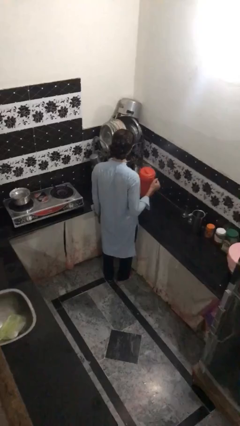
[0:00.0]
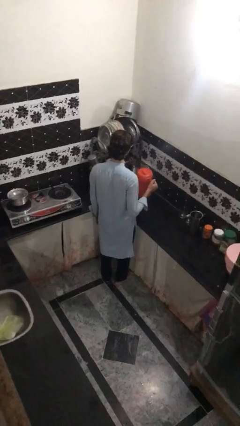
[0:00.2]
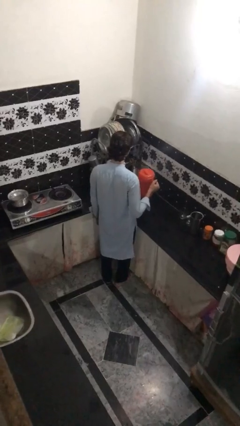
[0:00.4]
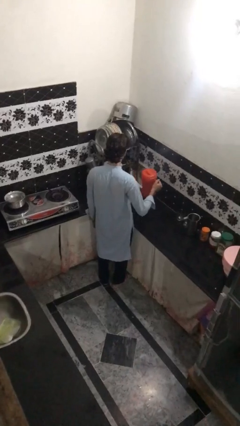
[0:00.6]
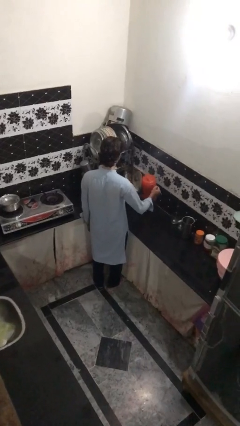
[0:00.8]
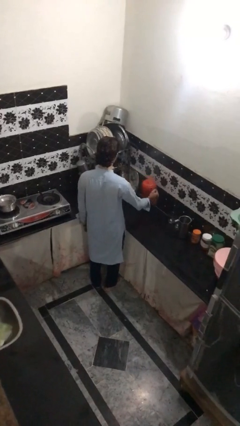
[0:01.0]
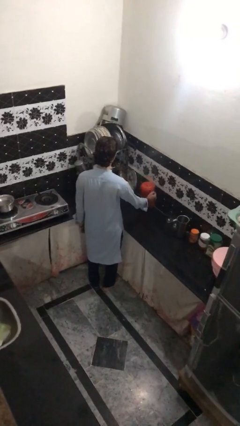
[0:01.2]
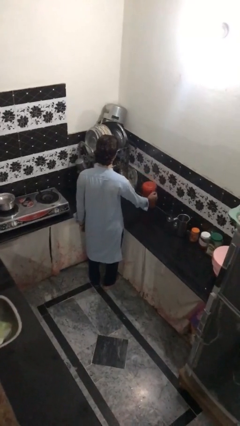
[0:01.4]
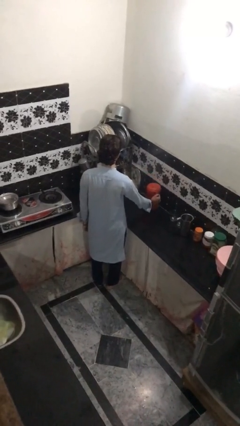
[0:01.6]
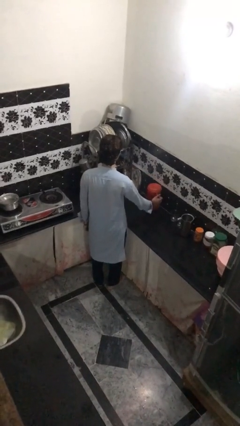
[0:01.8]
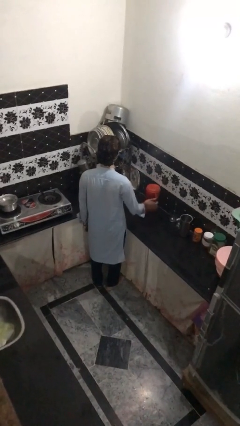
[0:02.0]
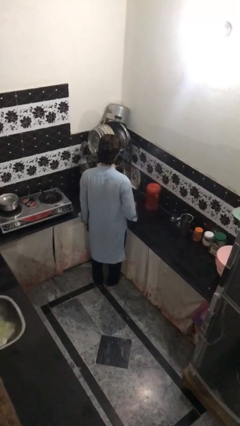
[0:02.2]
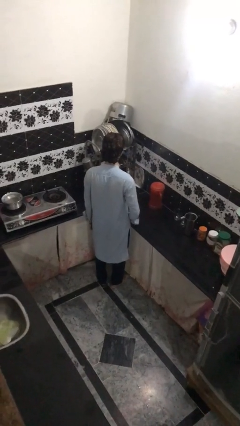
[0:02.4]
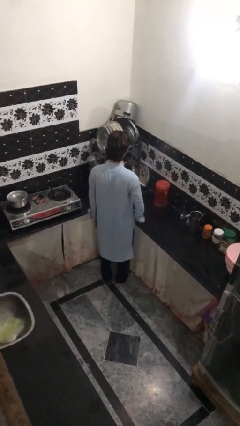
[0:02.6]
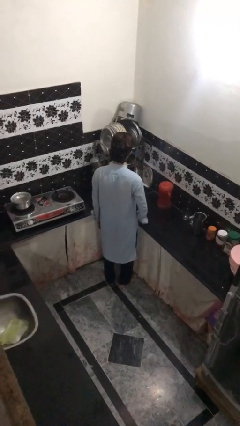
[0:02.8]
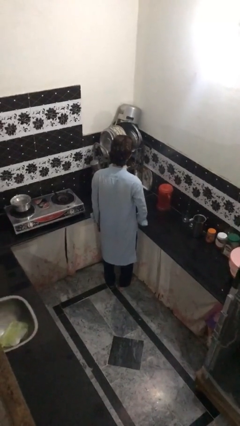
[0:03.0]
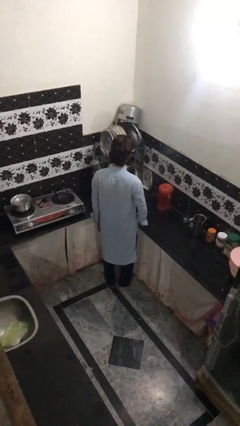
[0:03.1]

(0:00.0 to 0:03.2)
person puts down object on countertop

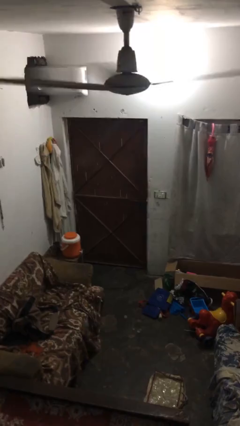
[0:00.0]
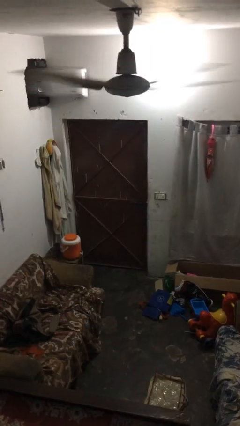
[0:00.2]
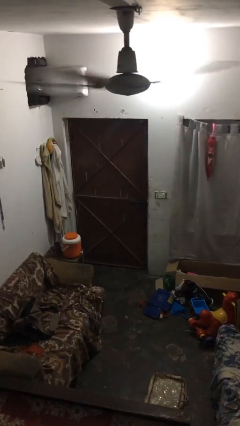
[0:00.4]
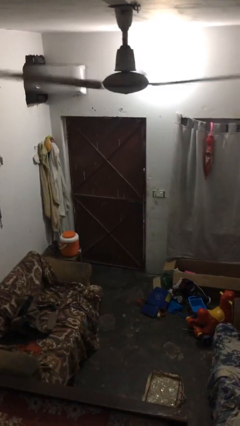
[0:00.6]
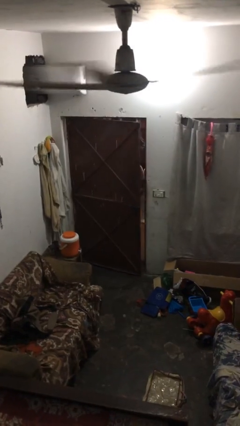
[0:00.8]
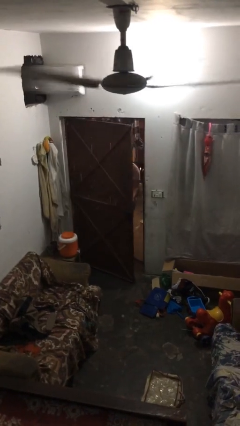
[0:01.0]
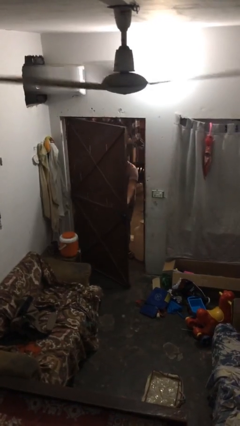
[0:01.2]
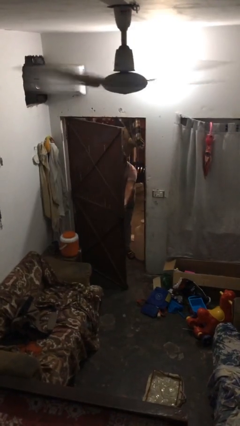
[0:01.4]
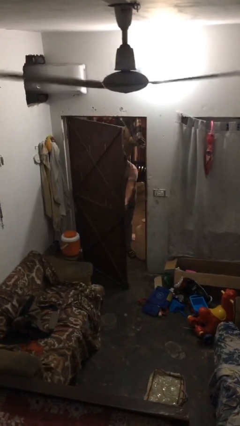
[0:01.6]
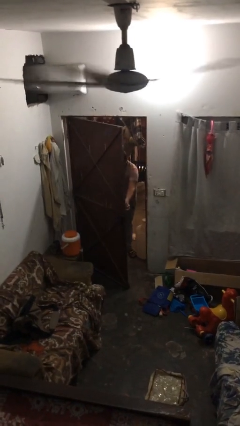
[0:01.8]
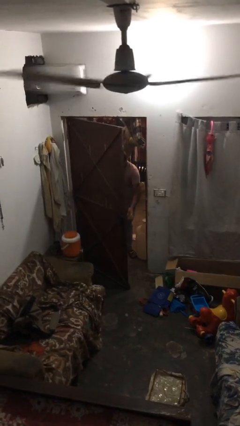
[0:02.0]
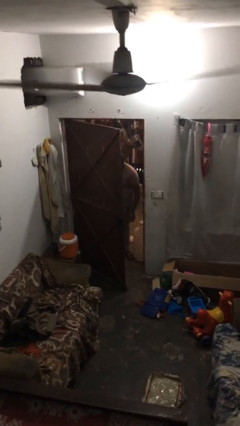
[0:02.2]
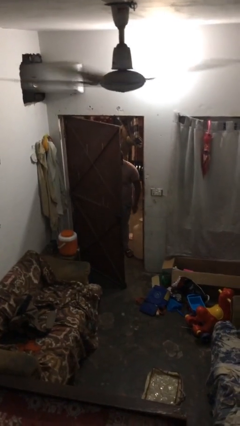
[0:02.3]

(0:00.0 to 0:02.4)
person opens facility door

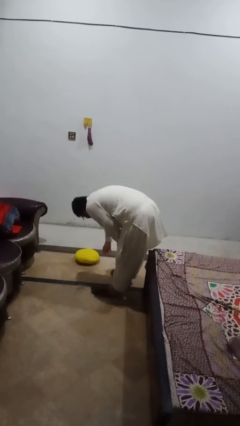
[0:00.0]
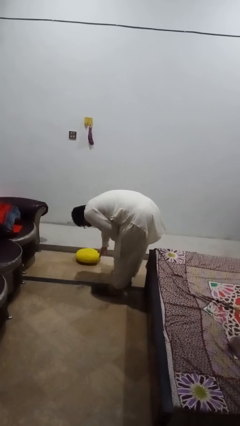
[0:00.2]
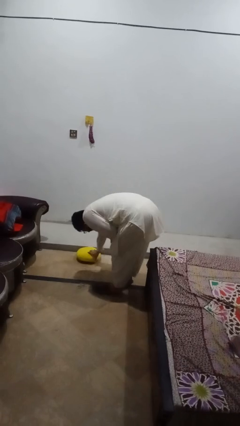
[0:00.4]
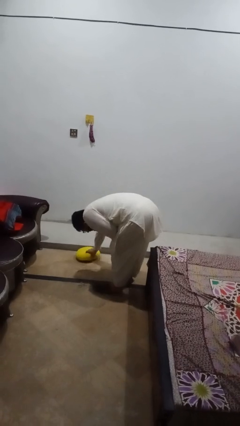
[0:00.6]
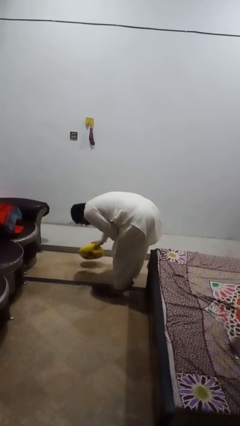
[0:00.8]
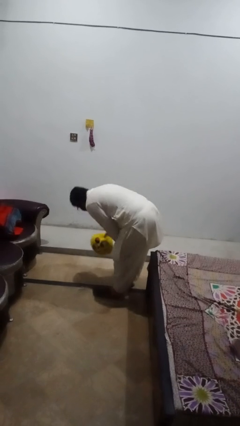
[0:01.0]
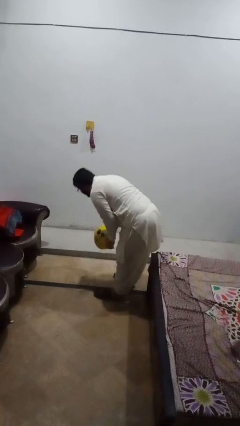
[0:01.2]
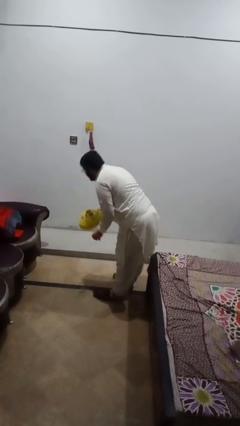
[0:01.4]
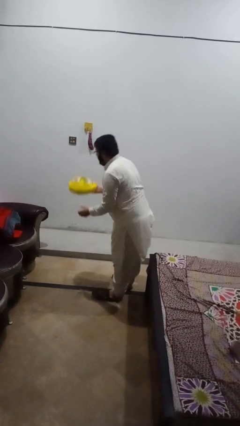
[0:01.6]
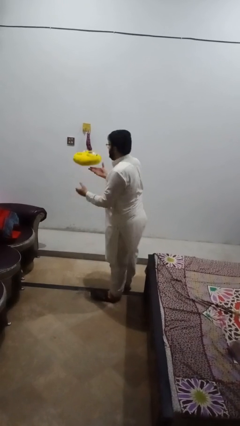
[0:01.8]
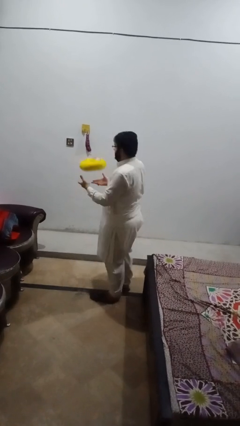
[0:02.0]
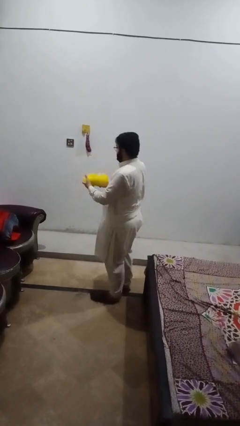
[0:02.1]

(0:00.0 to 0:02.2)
person picks up object from floor

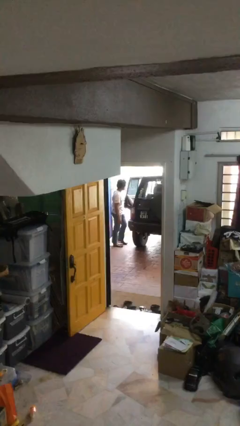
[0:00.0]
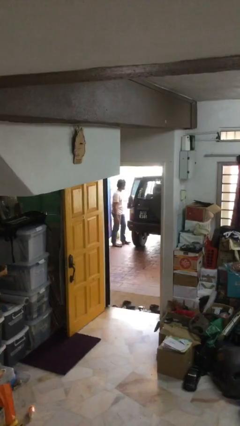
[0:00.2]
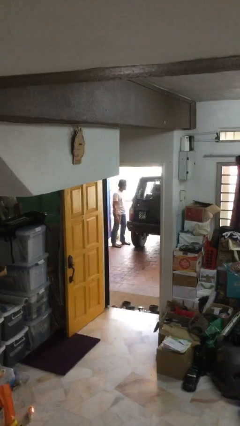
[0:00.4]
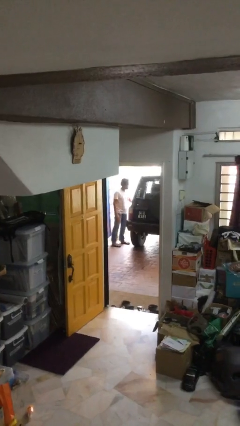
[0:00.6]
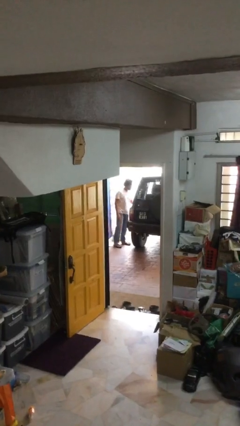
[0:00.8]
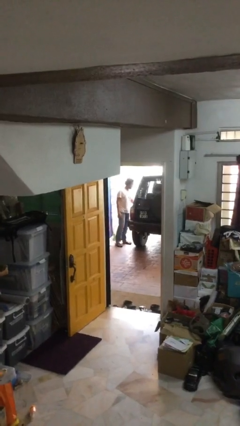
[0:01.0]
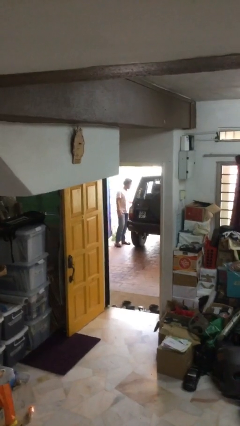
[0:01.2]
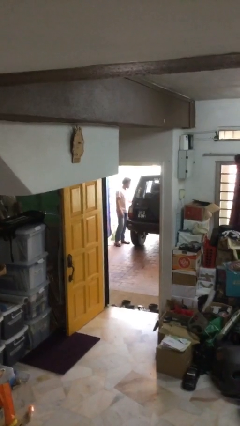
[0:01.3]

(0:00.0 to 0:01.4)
person closes car door

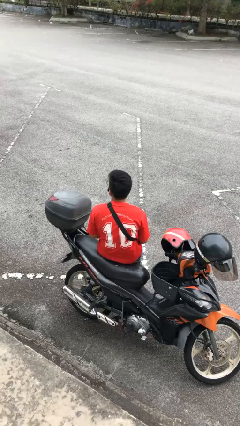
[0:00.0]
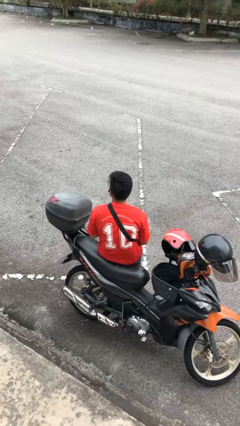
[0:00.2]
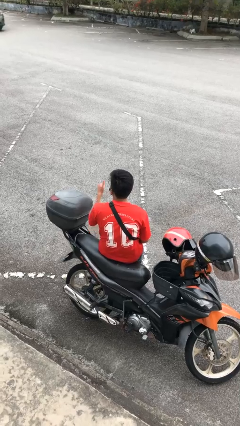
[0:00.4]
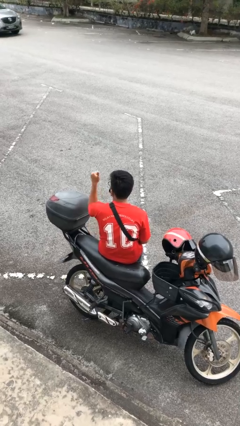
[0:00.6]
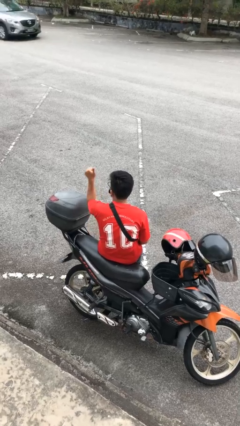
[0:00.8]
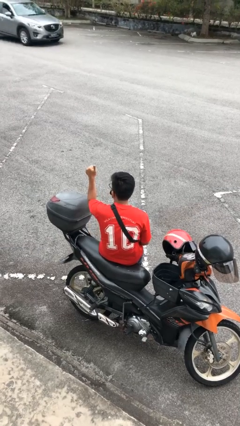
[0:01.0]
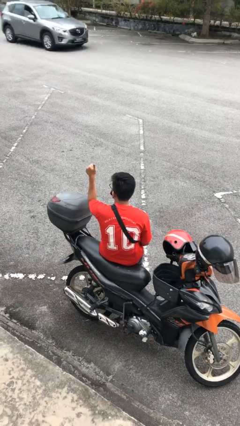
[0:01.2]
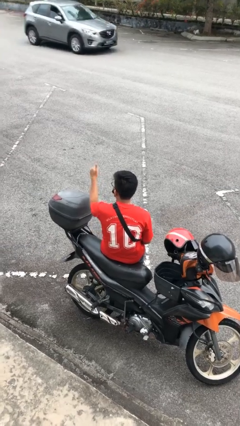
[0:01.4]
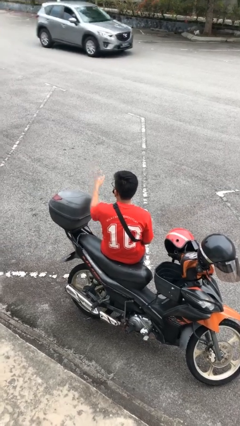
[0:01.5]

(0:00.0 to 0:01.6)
person gestures thumbs up

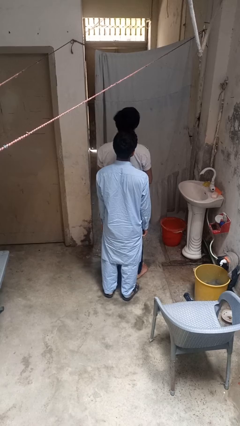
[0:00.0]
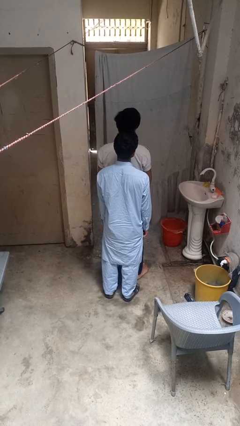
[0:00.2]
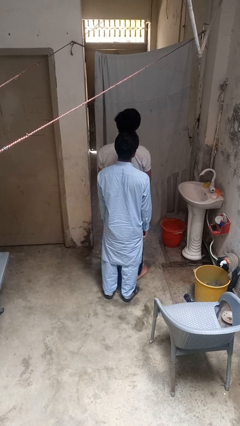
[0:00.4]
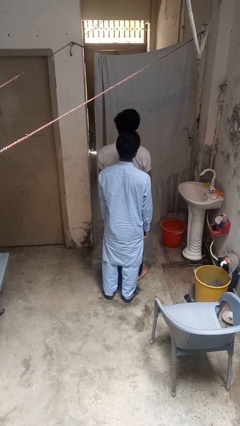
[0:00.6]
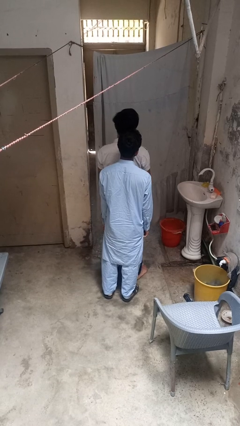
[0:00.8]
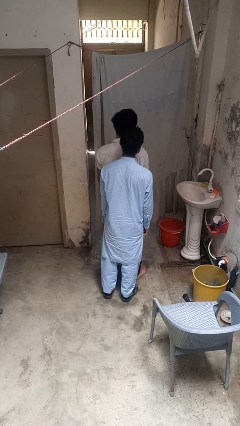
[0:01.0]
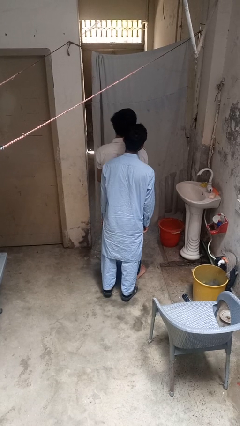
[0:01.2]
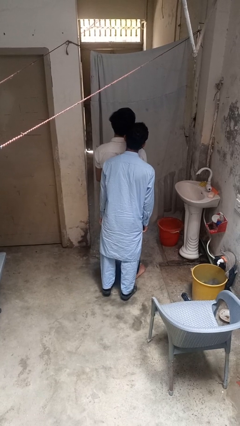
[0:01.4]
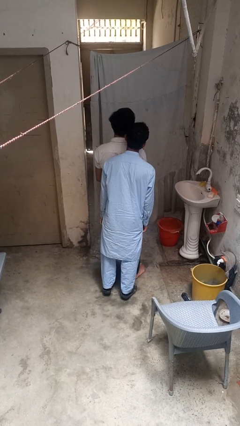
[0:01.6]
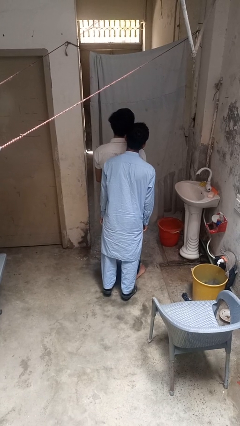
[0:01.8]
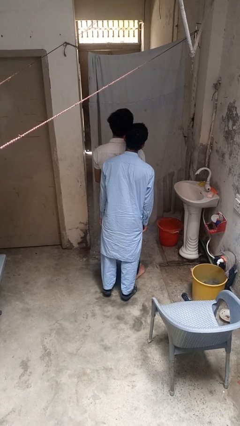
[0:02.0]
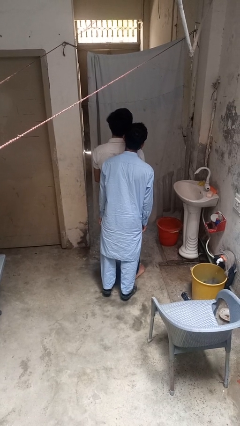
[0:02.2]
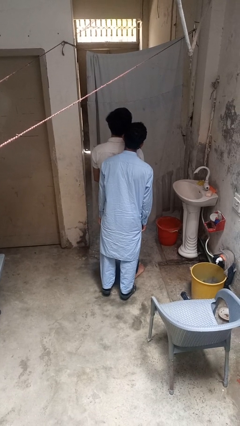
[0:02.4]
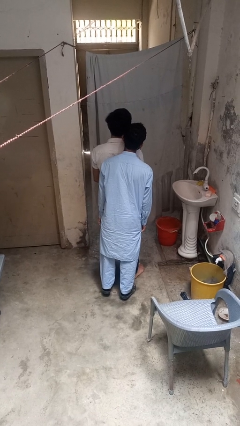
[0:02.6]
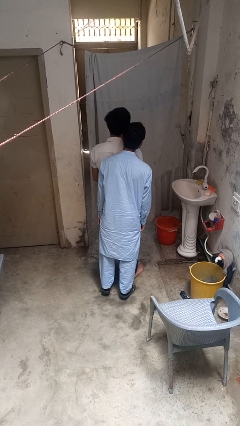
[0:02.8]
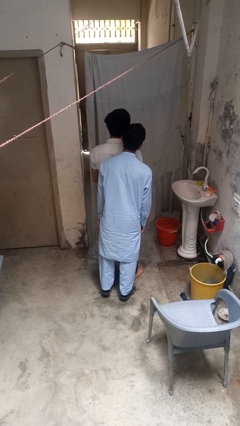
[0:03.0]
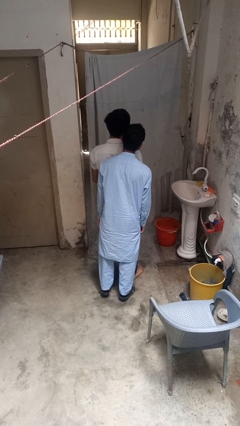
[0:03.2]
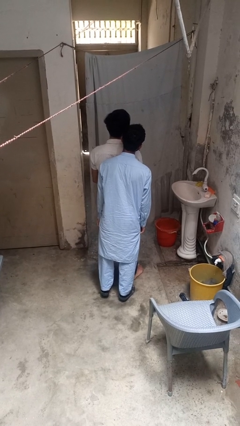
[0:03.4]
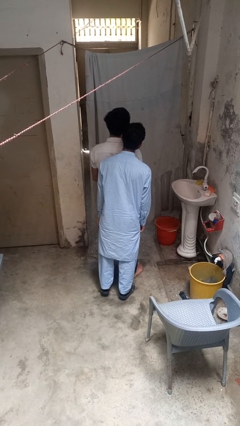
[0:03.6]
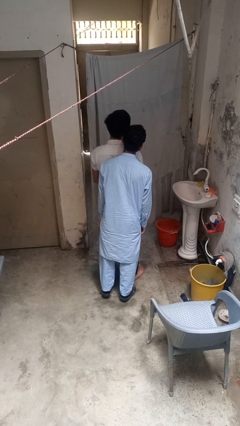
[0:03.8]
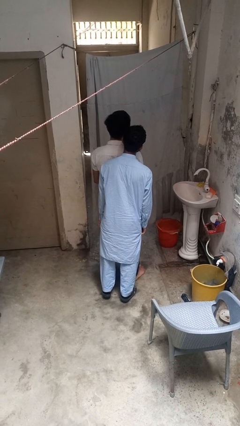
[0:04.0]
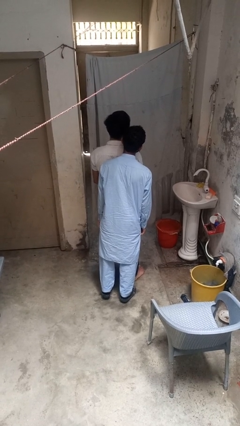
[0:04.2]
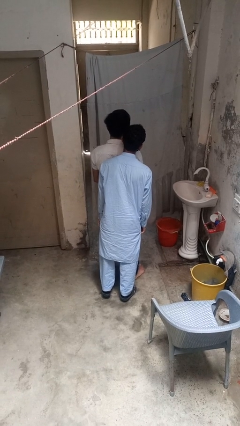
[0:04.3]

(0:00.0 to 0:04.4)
person looks over shoulder

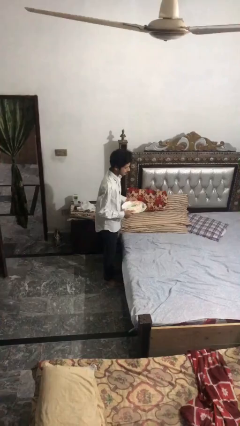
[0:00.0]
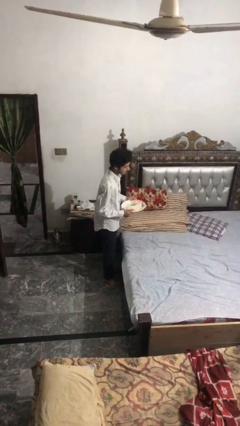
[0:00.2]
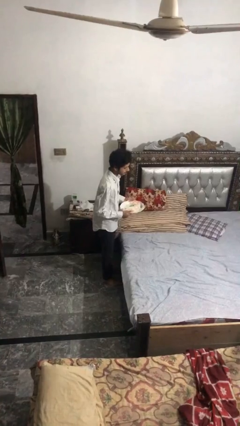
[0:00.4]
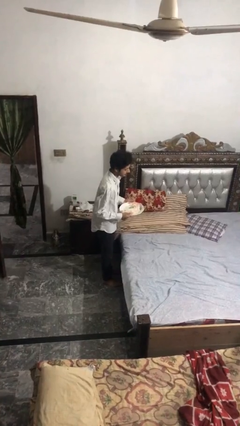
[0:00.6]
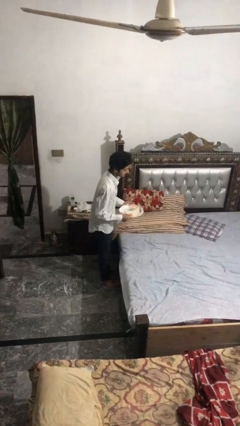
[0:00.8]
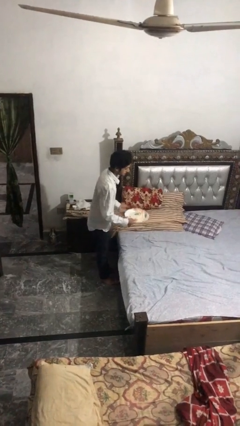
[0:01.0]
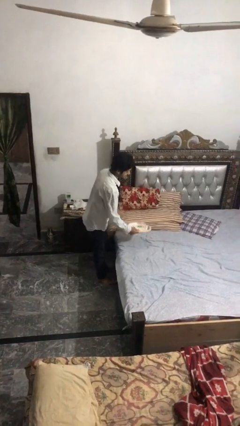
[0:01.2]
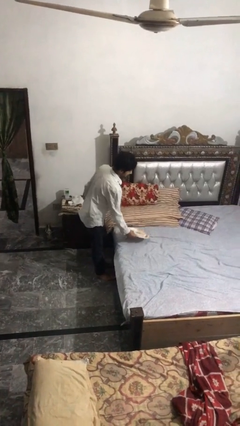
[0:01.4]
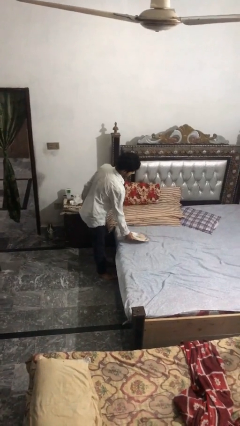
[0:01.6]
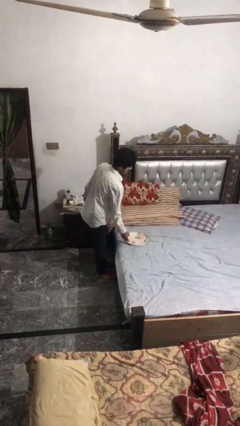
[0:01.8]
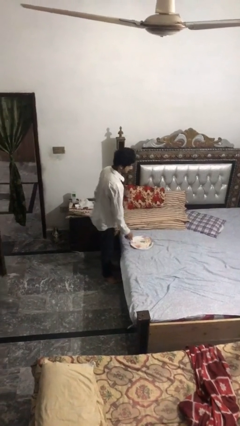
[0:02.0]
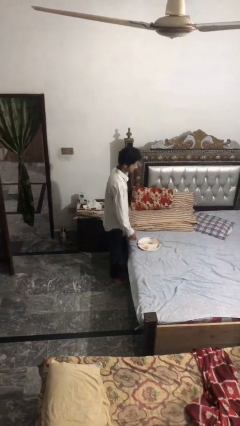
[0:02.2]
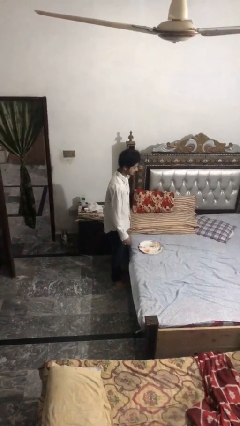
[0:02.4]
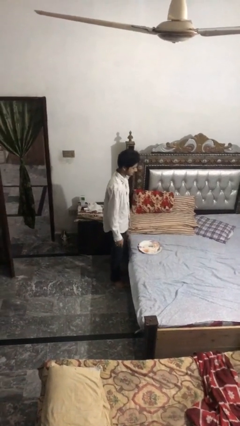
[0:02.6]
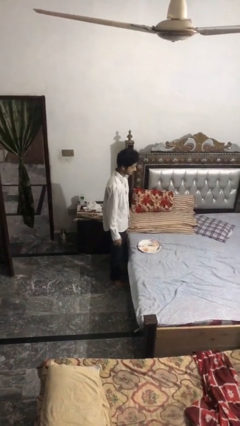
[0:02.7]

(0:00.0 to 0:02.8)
person puts down object on bed
